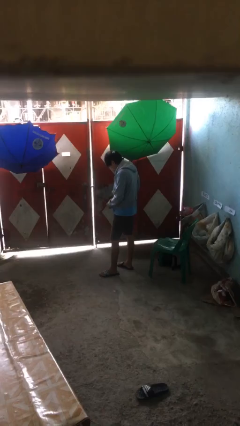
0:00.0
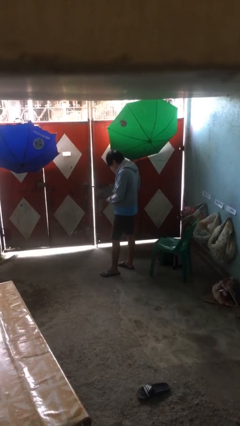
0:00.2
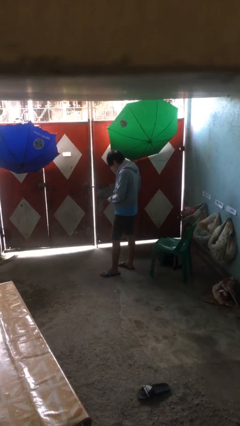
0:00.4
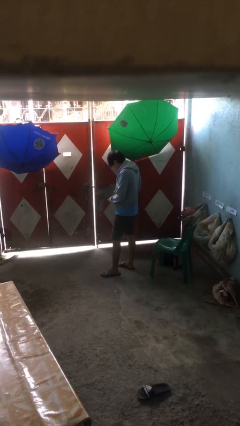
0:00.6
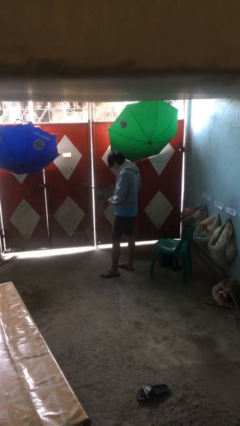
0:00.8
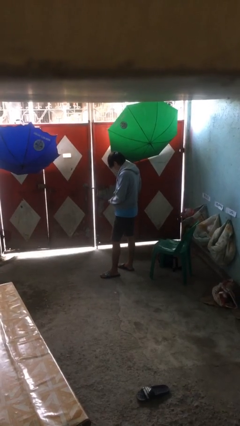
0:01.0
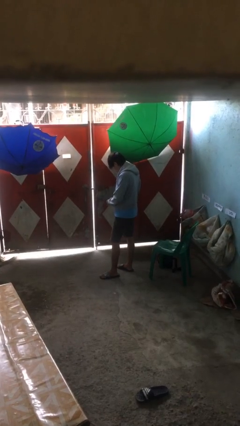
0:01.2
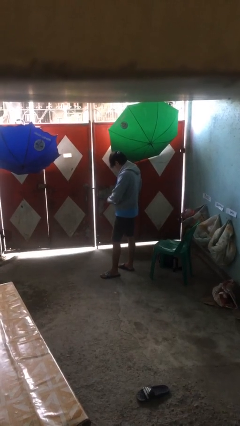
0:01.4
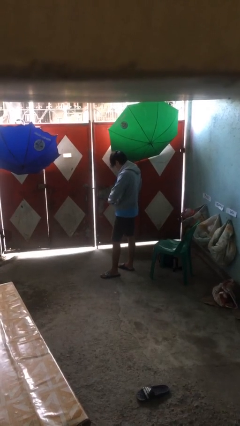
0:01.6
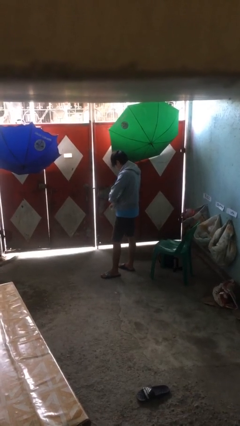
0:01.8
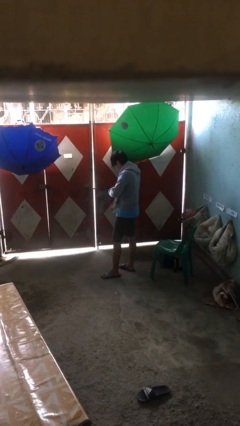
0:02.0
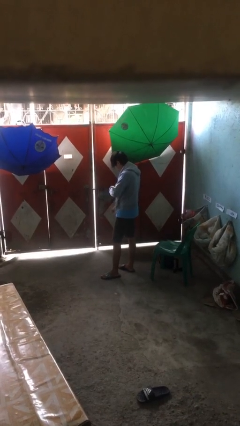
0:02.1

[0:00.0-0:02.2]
person zips up jacket

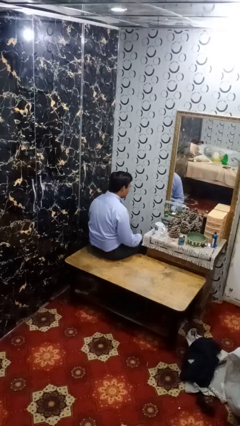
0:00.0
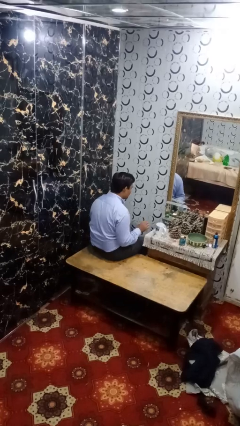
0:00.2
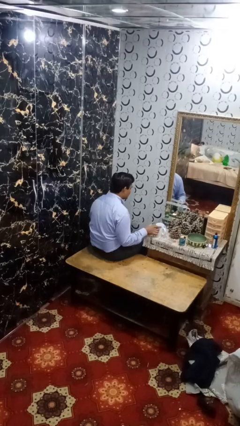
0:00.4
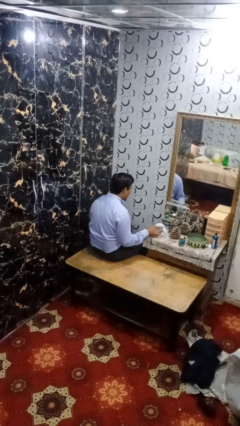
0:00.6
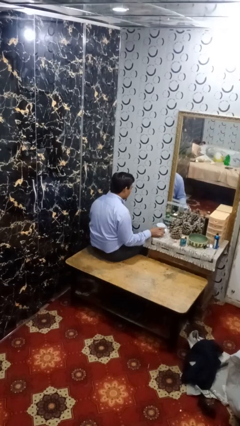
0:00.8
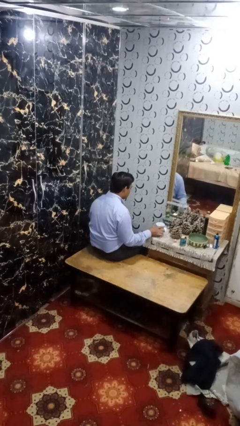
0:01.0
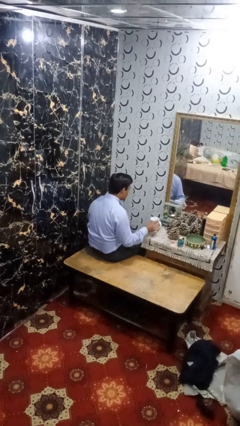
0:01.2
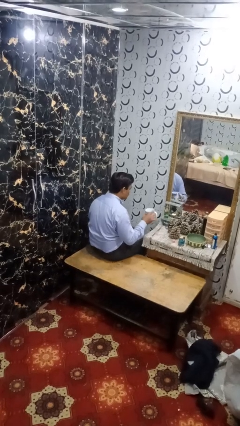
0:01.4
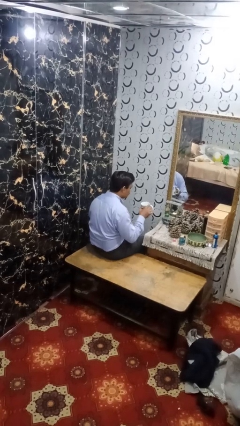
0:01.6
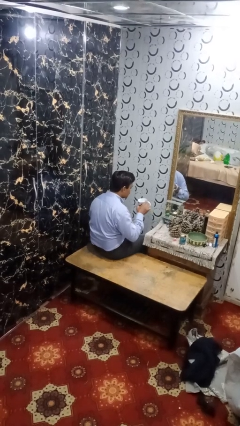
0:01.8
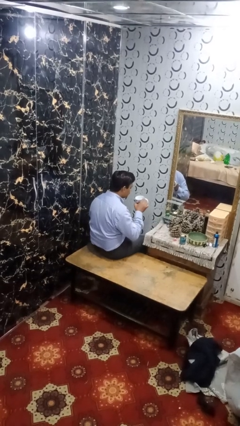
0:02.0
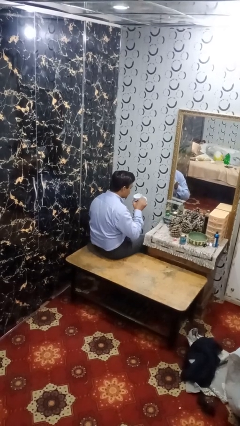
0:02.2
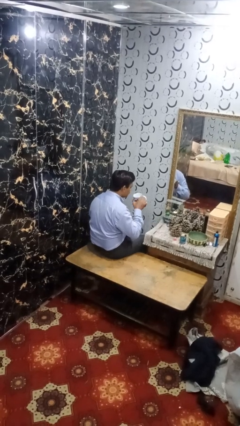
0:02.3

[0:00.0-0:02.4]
person picks up object from table

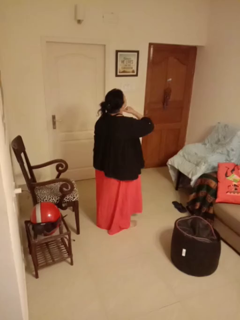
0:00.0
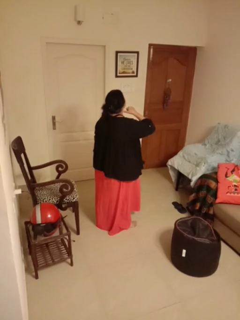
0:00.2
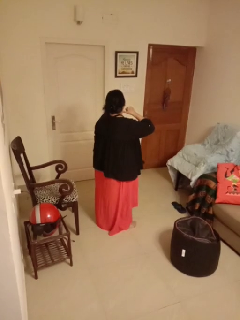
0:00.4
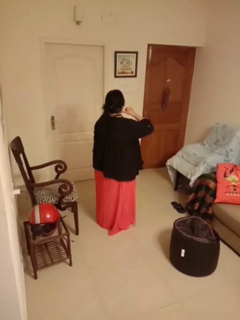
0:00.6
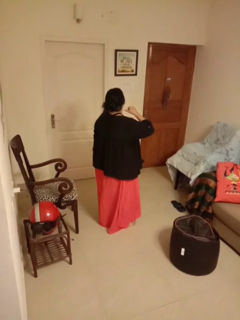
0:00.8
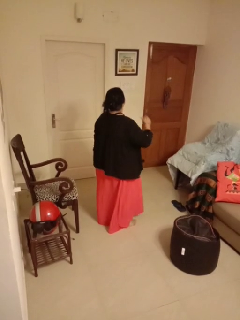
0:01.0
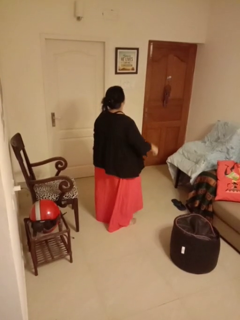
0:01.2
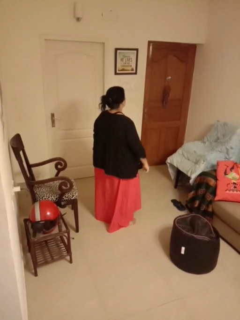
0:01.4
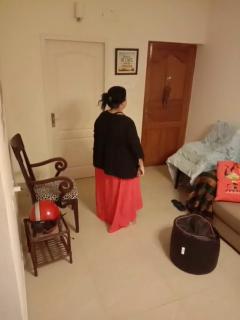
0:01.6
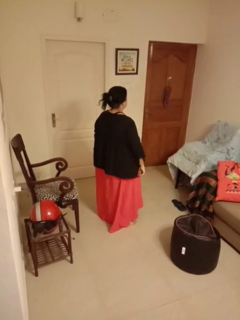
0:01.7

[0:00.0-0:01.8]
person gestures cut

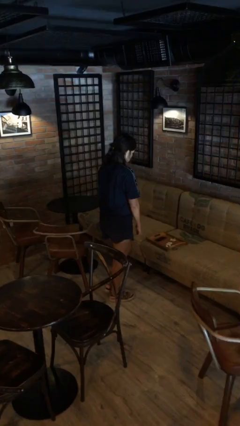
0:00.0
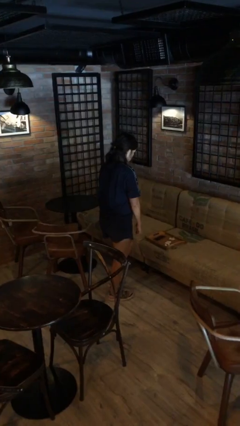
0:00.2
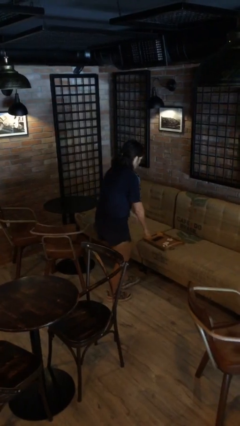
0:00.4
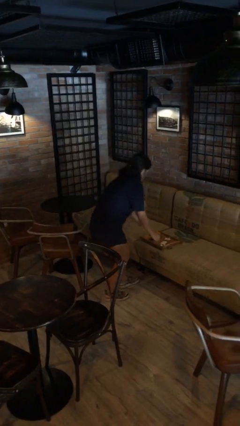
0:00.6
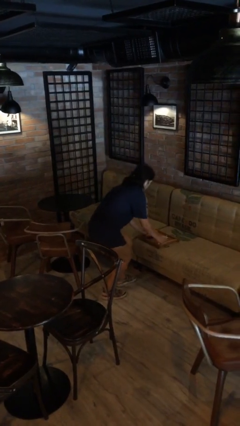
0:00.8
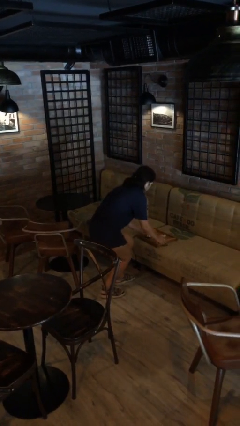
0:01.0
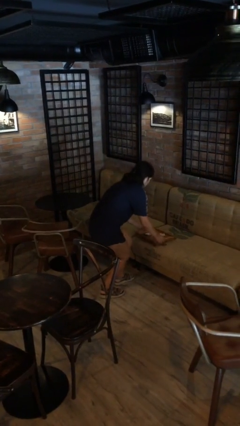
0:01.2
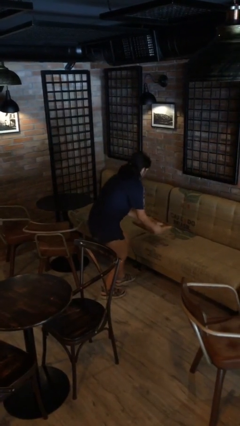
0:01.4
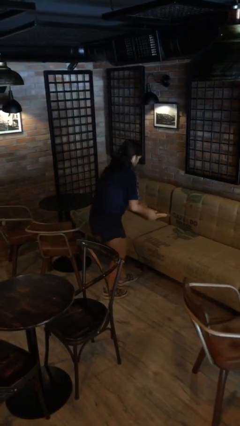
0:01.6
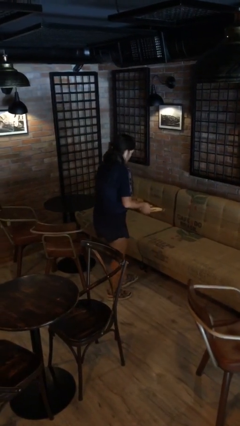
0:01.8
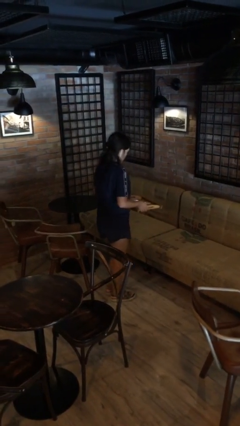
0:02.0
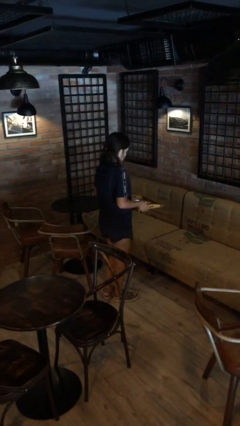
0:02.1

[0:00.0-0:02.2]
person picks up object from couch

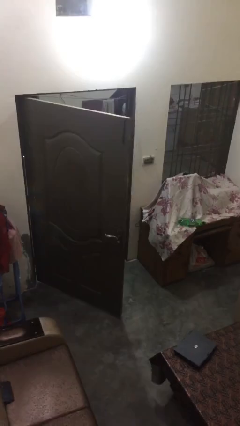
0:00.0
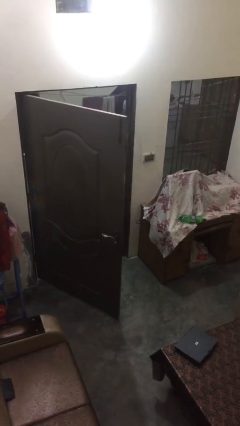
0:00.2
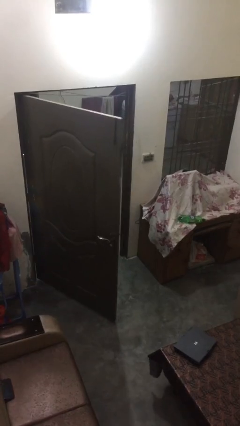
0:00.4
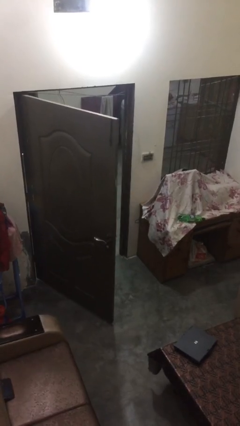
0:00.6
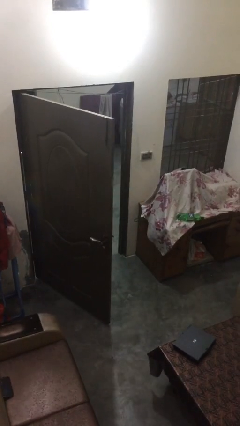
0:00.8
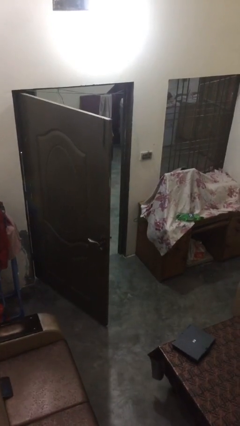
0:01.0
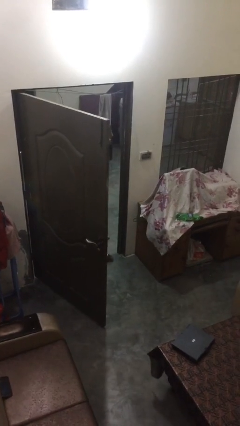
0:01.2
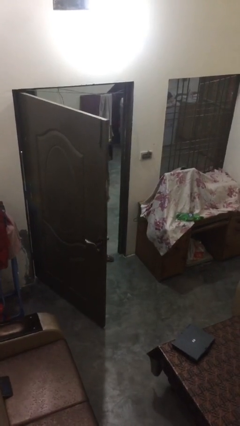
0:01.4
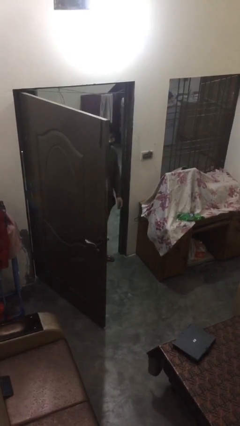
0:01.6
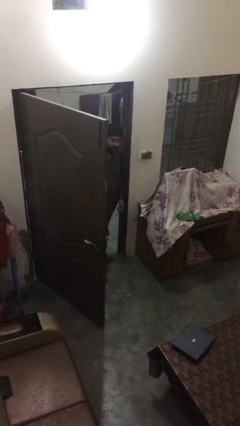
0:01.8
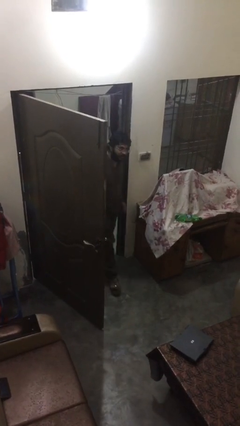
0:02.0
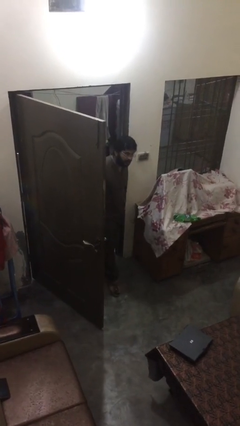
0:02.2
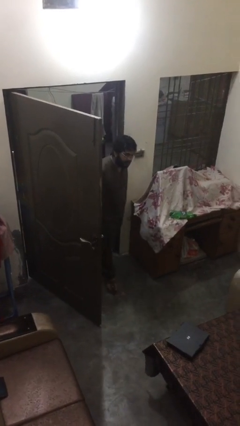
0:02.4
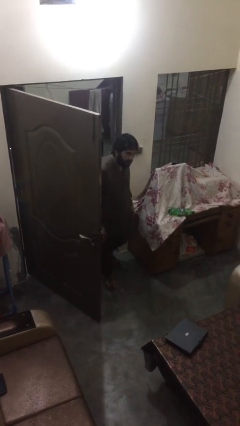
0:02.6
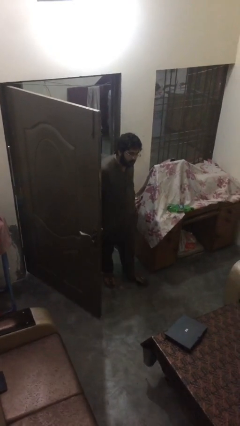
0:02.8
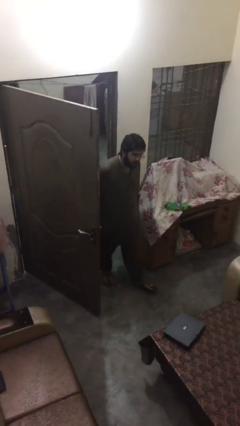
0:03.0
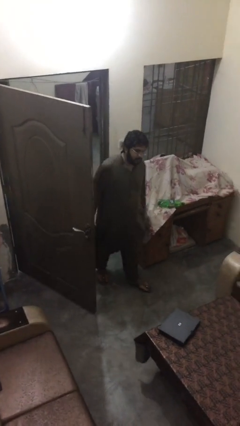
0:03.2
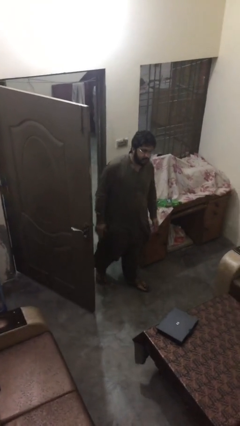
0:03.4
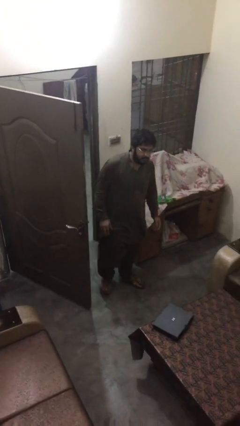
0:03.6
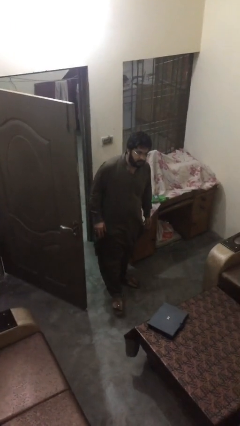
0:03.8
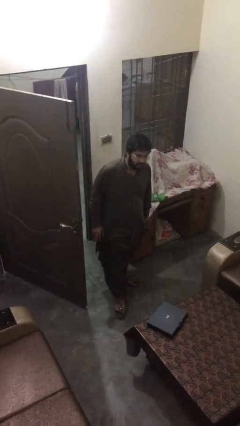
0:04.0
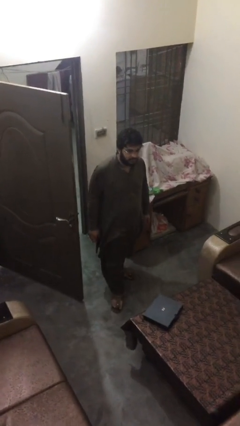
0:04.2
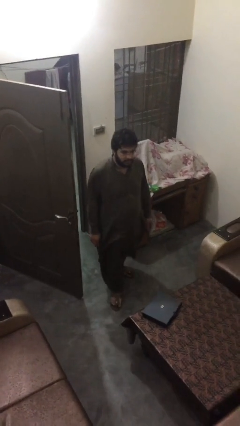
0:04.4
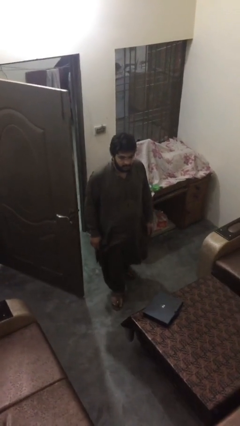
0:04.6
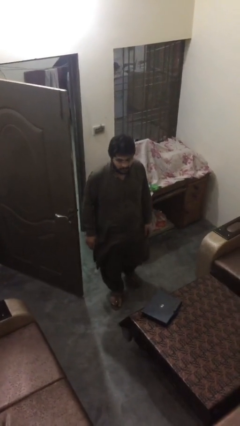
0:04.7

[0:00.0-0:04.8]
person enters scene through structure

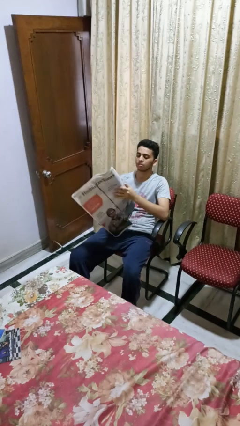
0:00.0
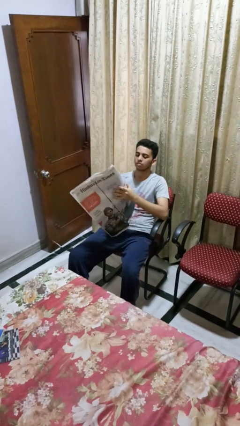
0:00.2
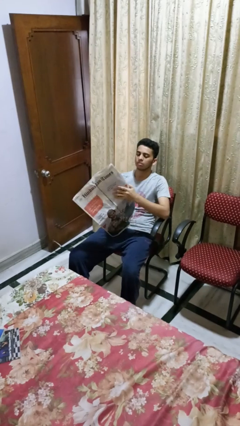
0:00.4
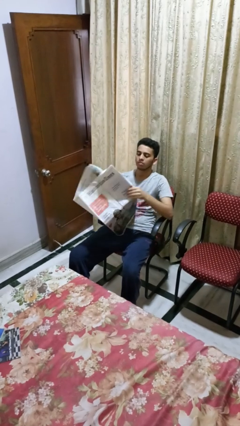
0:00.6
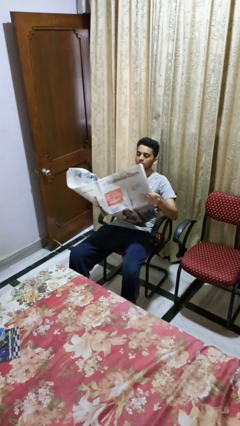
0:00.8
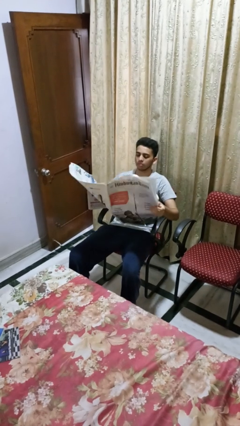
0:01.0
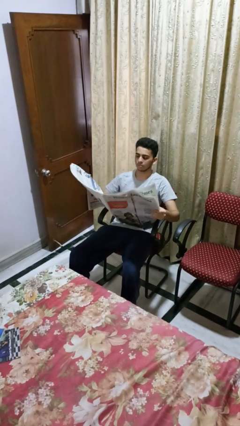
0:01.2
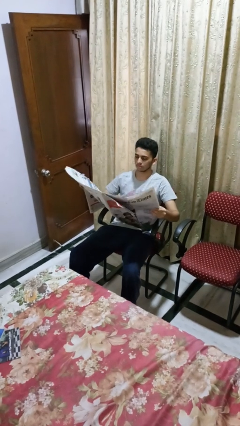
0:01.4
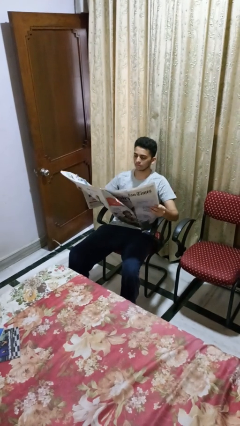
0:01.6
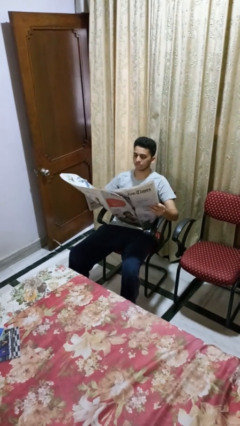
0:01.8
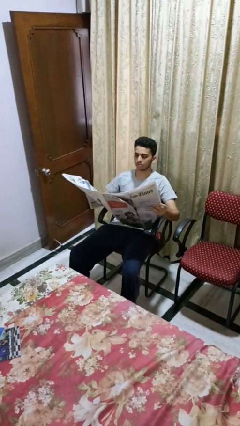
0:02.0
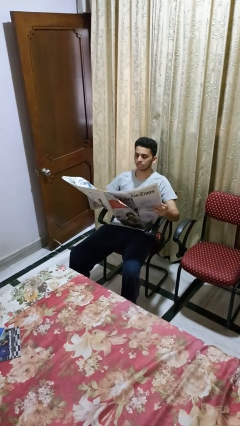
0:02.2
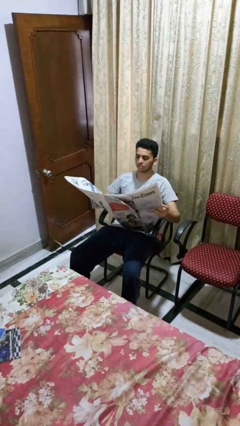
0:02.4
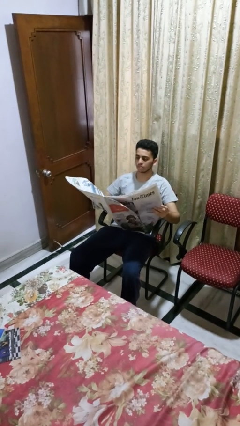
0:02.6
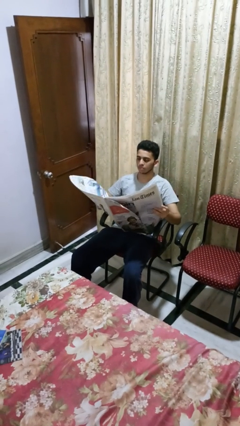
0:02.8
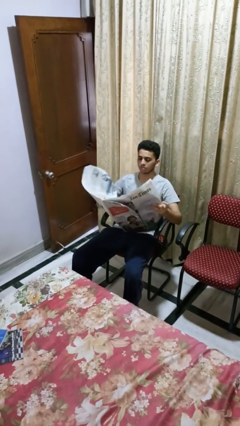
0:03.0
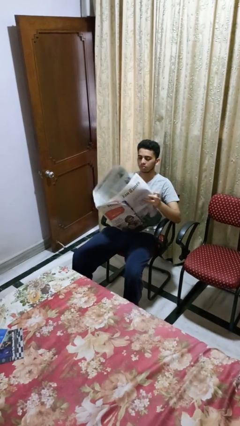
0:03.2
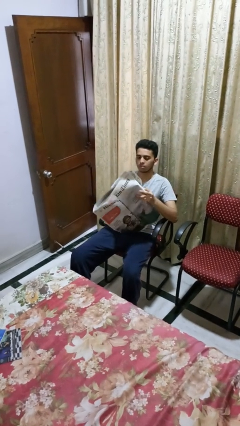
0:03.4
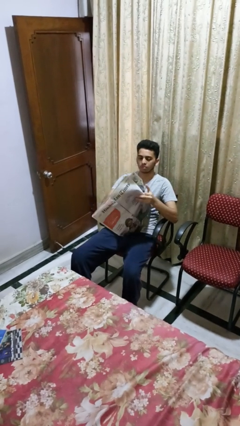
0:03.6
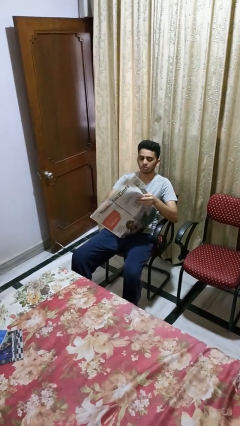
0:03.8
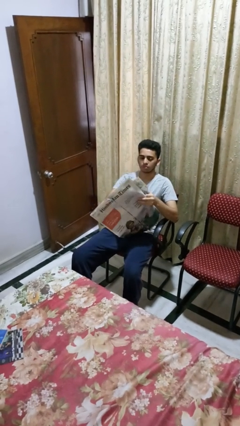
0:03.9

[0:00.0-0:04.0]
person reads newspaper

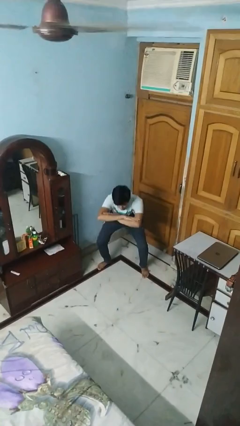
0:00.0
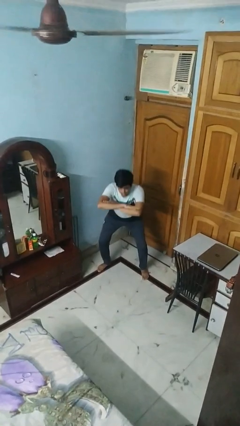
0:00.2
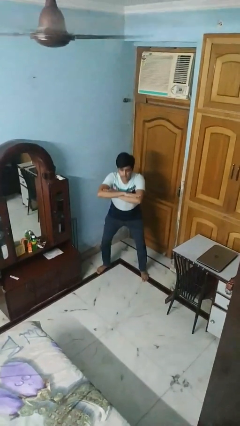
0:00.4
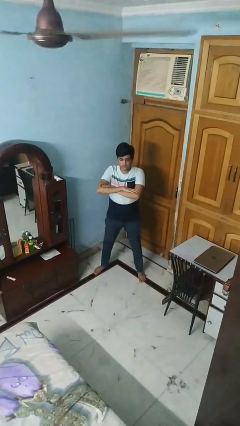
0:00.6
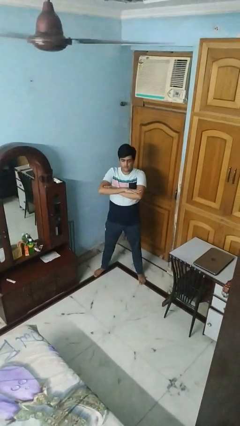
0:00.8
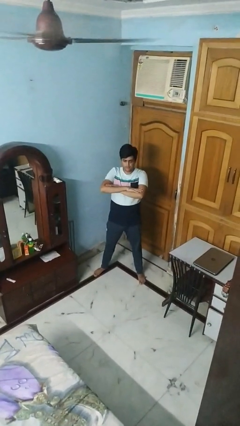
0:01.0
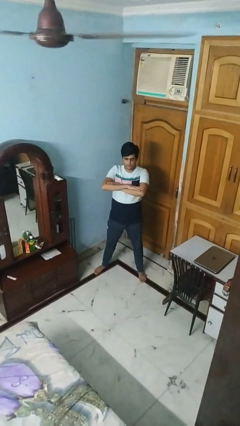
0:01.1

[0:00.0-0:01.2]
person stands up
